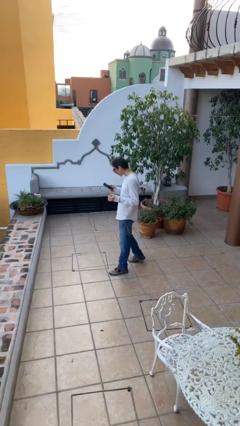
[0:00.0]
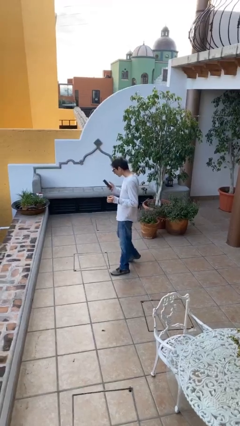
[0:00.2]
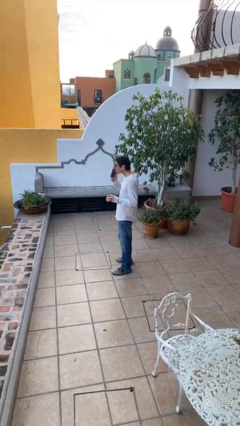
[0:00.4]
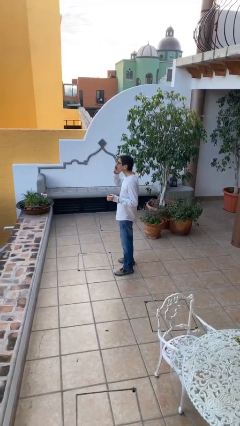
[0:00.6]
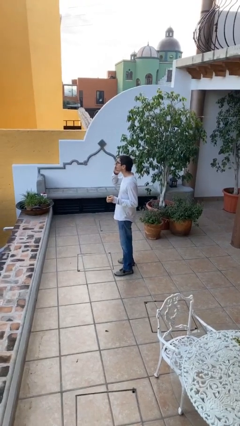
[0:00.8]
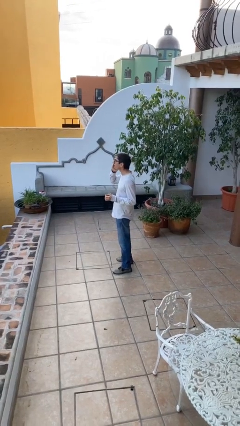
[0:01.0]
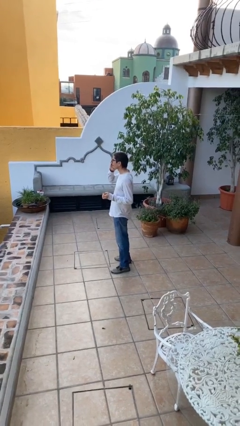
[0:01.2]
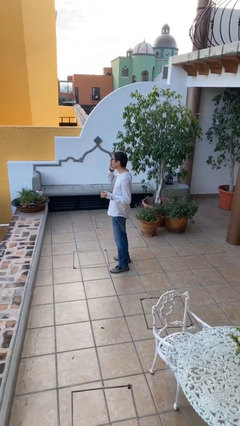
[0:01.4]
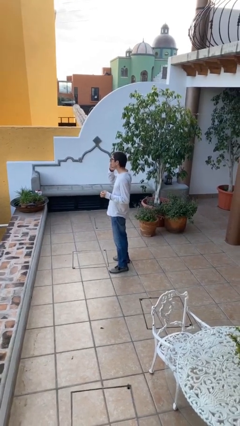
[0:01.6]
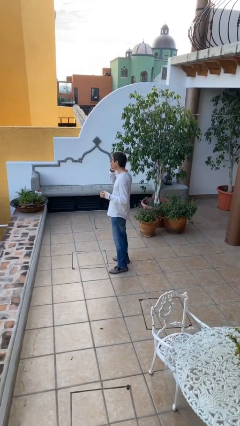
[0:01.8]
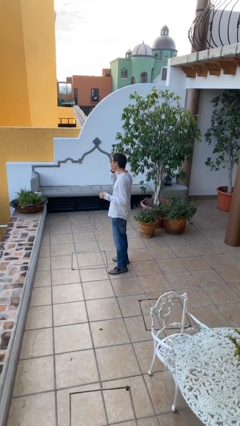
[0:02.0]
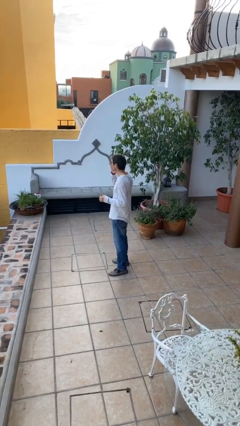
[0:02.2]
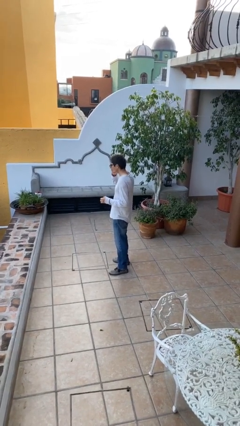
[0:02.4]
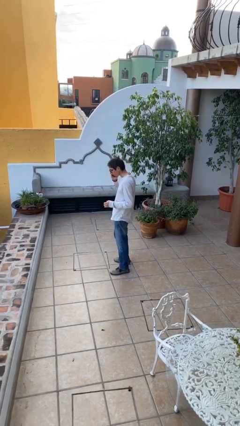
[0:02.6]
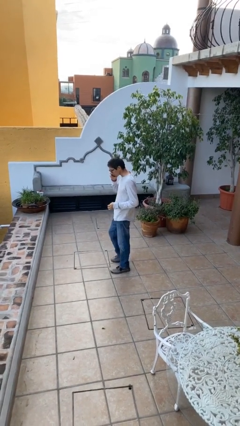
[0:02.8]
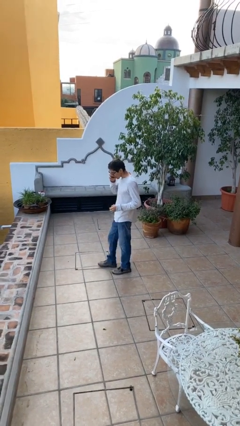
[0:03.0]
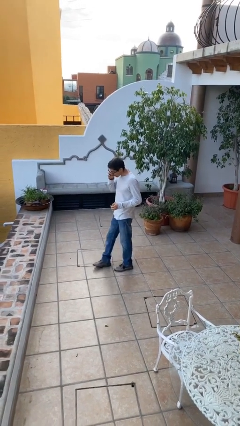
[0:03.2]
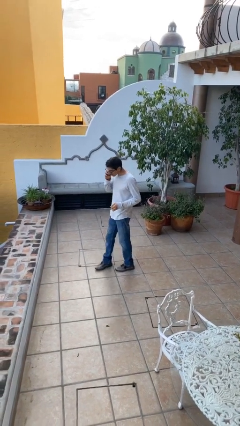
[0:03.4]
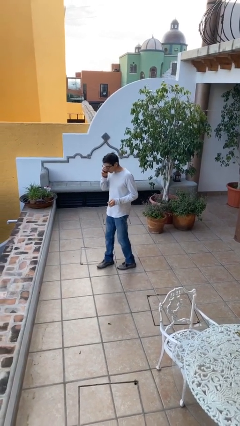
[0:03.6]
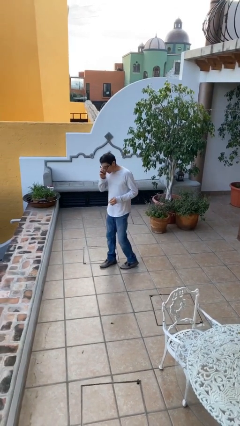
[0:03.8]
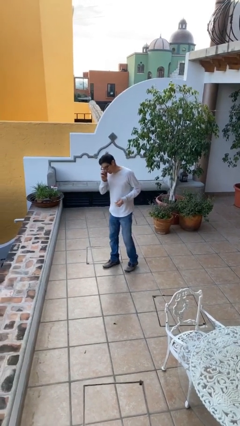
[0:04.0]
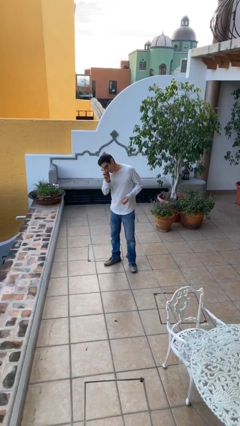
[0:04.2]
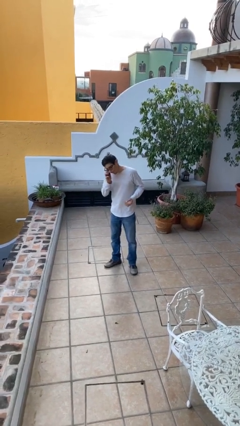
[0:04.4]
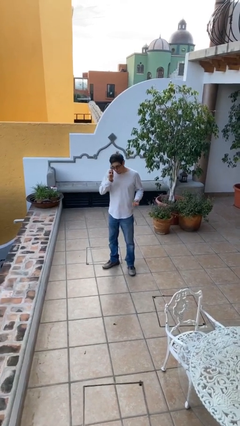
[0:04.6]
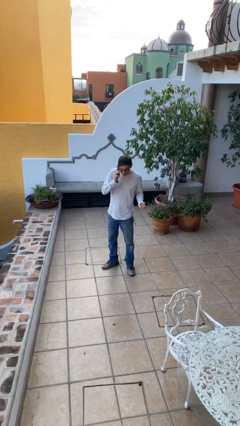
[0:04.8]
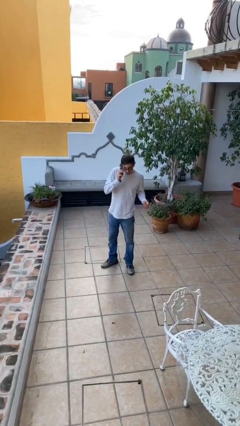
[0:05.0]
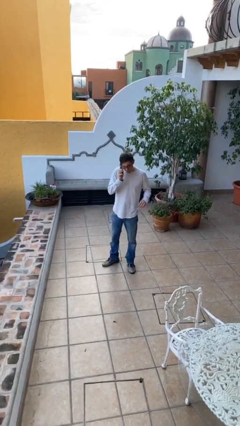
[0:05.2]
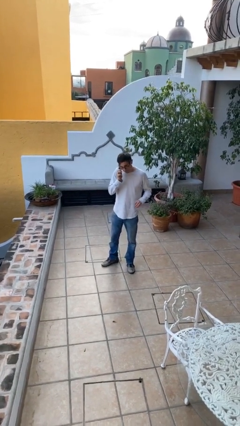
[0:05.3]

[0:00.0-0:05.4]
person talks on phone

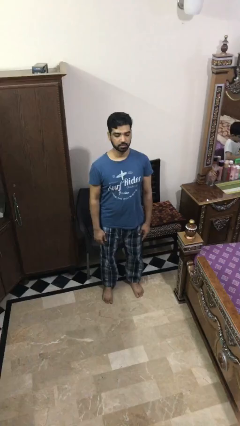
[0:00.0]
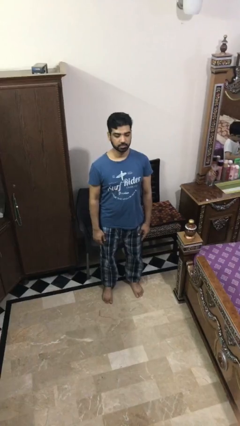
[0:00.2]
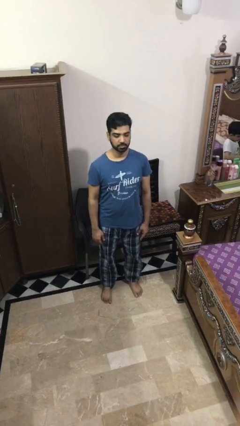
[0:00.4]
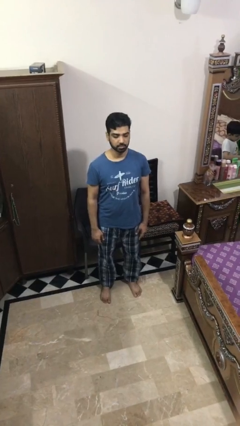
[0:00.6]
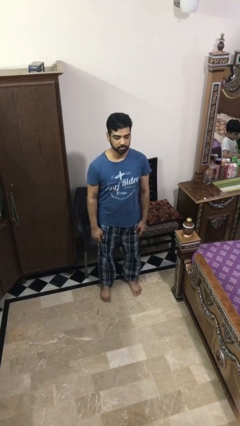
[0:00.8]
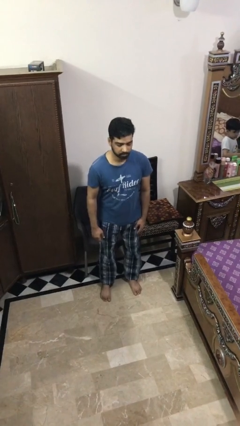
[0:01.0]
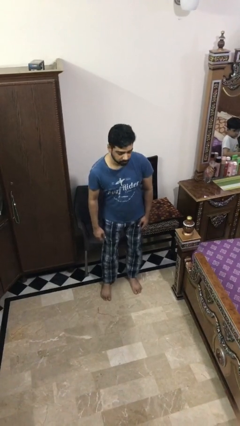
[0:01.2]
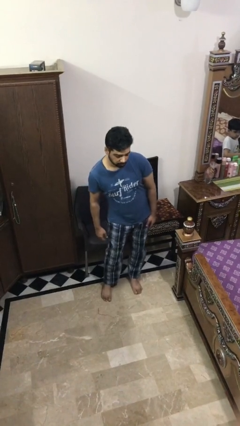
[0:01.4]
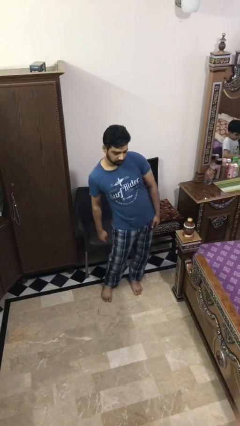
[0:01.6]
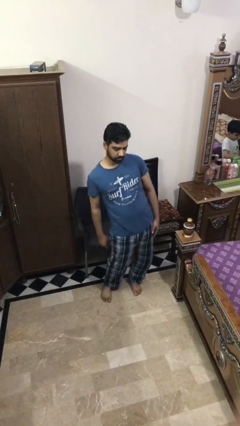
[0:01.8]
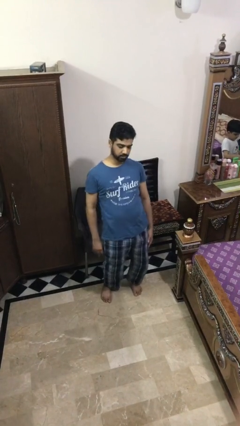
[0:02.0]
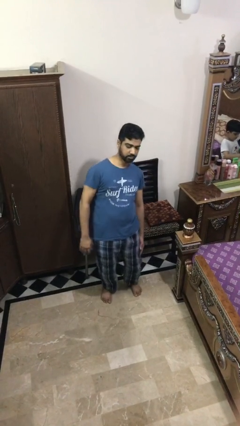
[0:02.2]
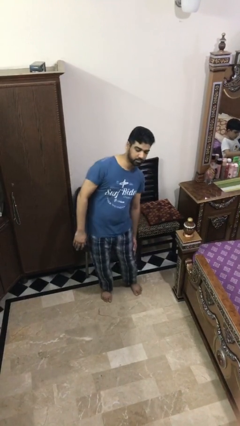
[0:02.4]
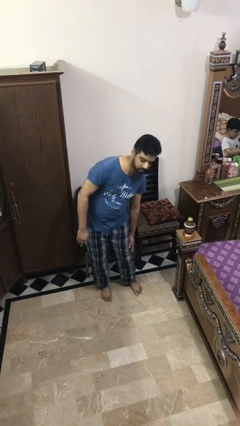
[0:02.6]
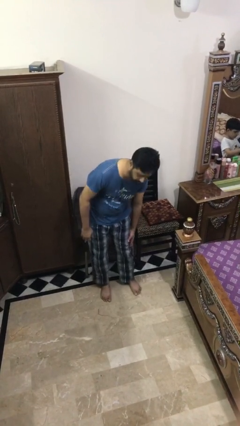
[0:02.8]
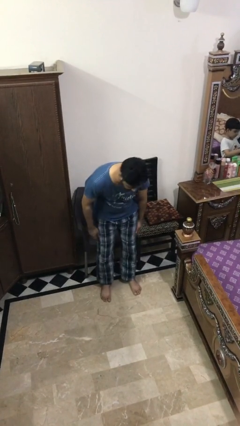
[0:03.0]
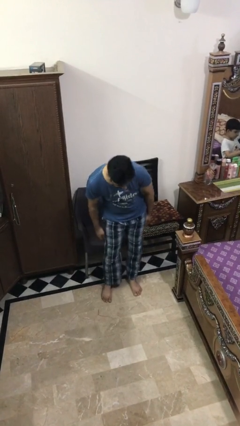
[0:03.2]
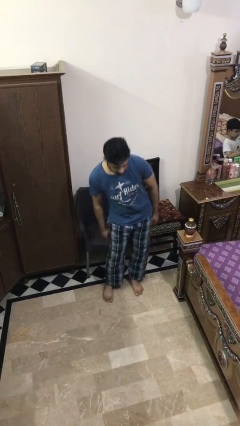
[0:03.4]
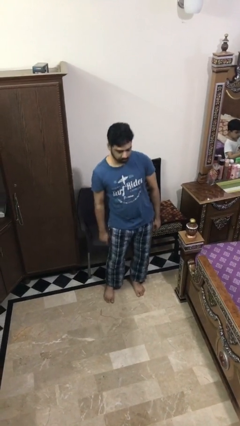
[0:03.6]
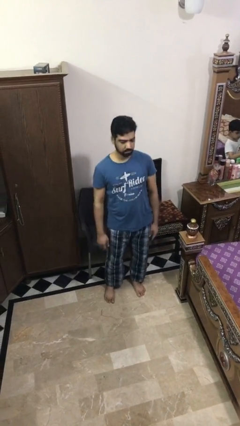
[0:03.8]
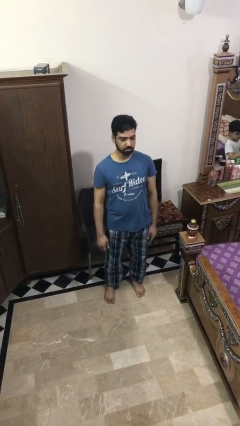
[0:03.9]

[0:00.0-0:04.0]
person wiggles hips

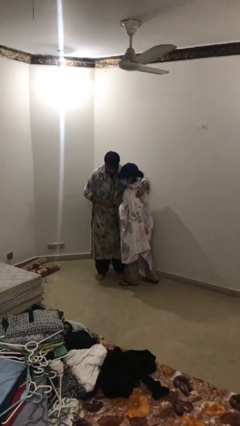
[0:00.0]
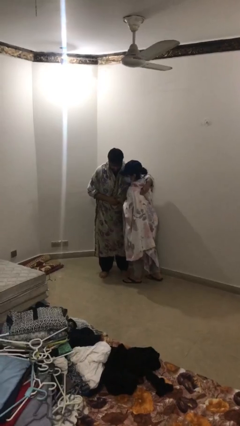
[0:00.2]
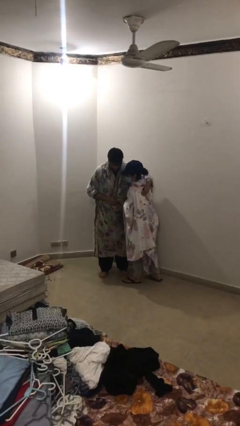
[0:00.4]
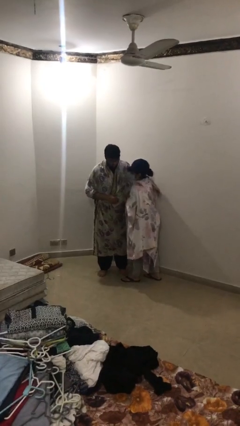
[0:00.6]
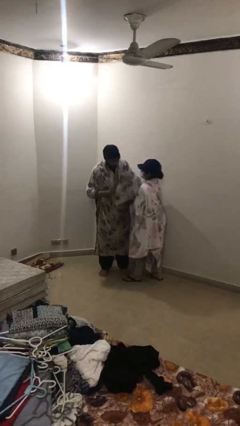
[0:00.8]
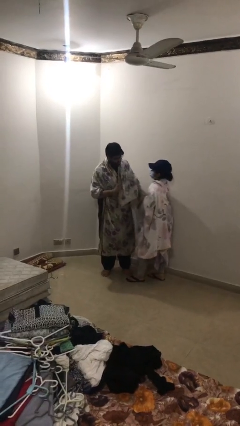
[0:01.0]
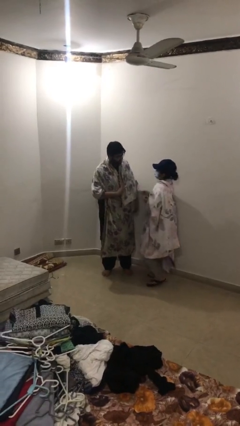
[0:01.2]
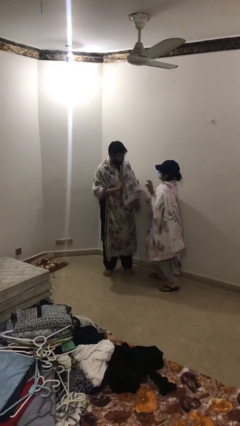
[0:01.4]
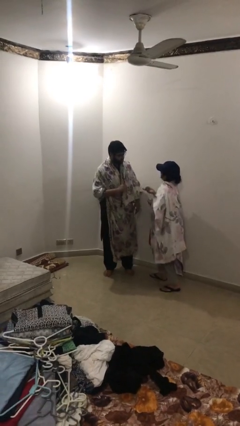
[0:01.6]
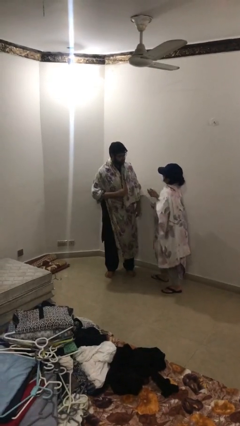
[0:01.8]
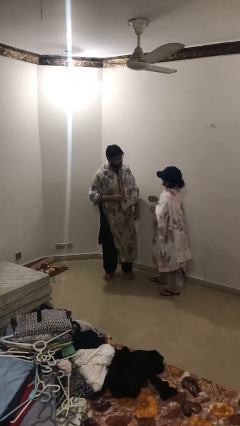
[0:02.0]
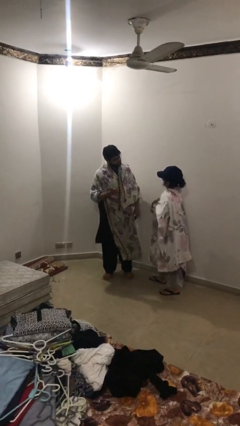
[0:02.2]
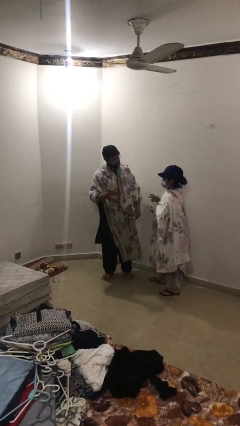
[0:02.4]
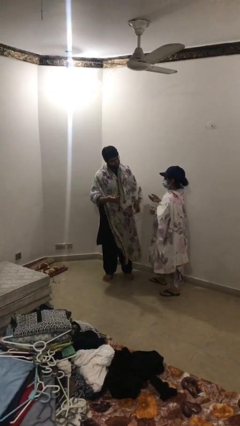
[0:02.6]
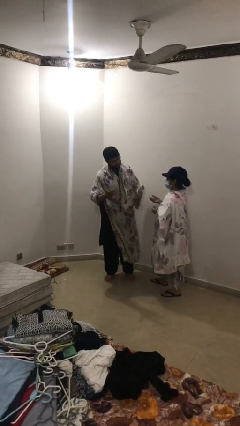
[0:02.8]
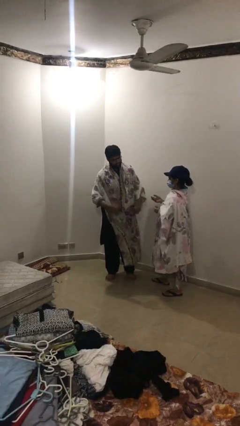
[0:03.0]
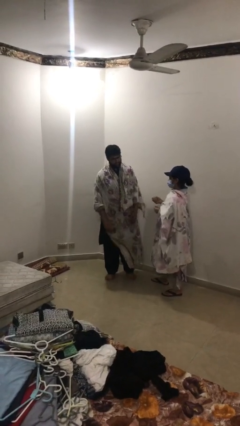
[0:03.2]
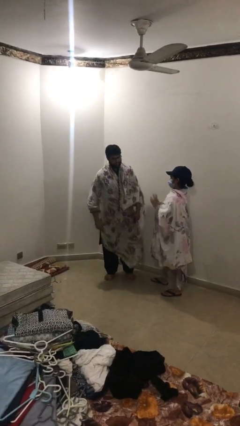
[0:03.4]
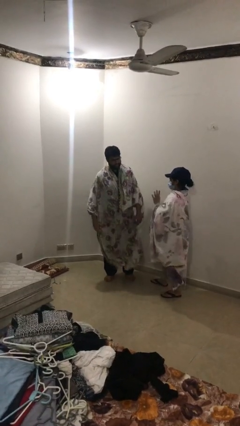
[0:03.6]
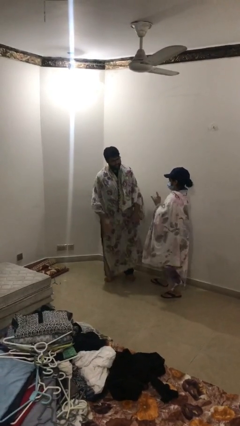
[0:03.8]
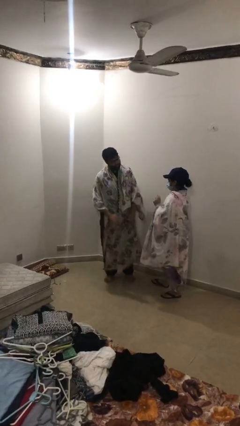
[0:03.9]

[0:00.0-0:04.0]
person talks to person

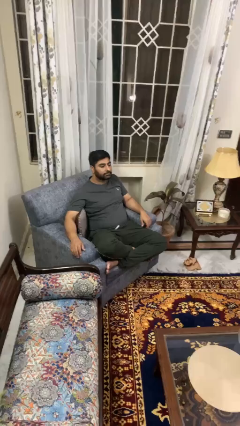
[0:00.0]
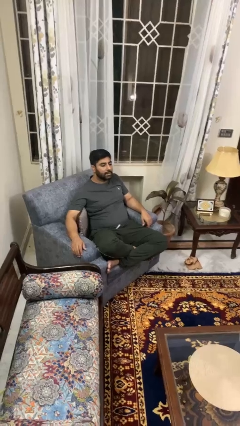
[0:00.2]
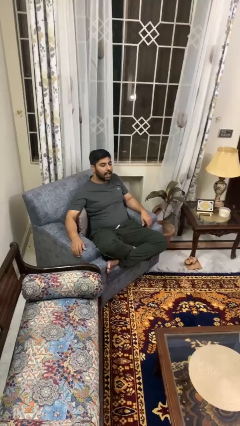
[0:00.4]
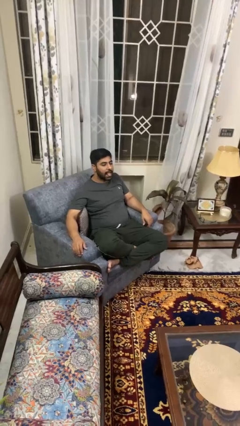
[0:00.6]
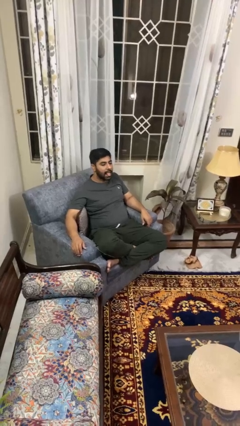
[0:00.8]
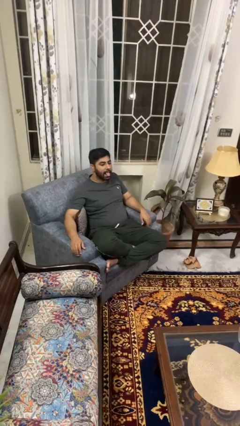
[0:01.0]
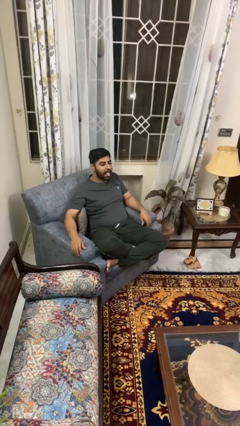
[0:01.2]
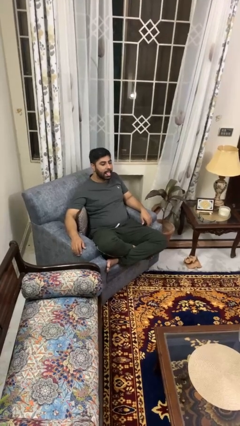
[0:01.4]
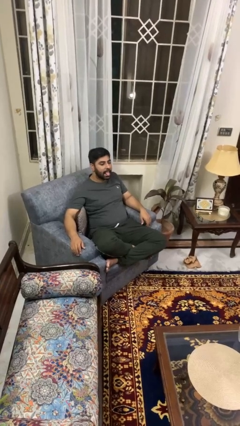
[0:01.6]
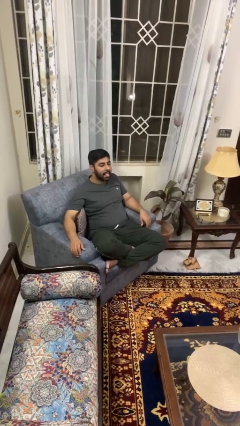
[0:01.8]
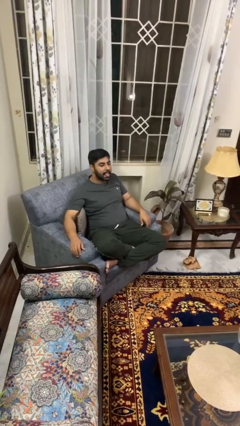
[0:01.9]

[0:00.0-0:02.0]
person sticks out tongue

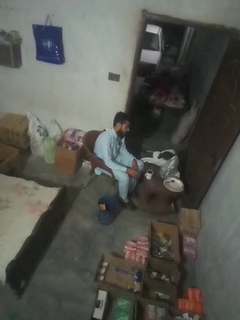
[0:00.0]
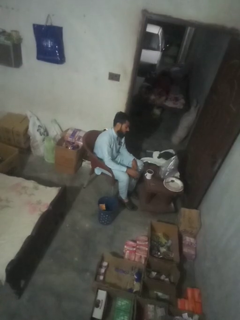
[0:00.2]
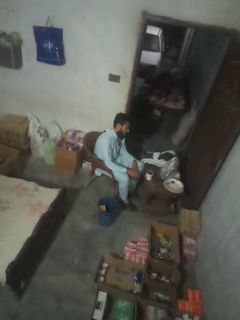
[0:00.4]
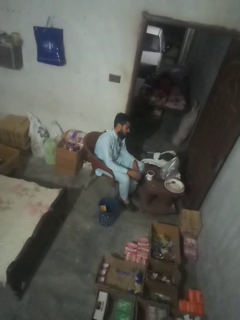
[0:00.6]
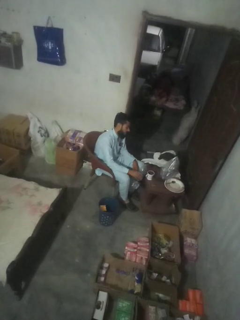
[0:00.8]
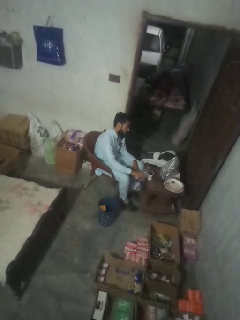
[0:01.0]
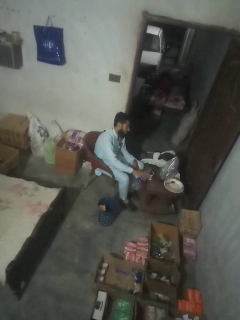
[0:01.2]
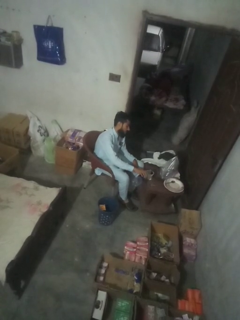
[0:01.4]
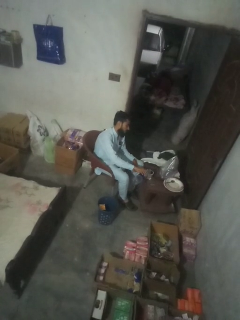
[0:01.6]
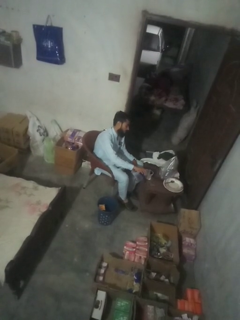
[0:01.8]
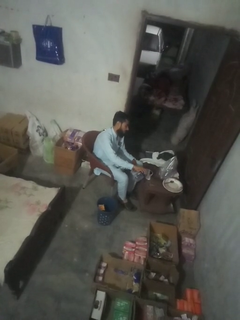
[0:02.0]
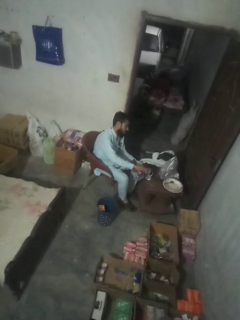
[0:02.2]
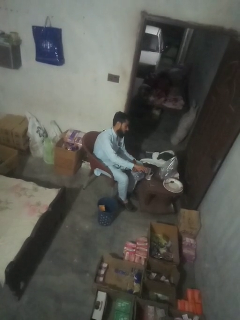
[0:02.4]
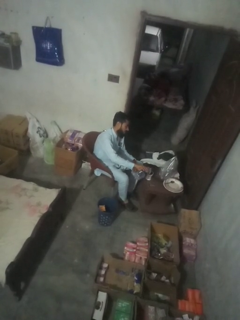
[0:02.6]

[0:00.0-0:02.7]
person pours liquid into cup

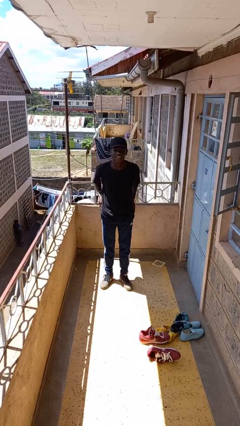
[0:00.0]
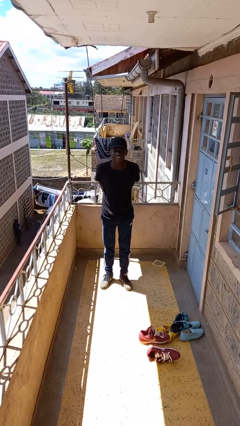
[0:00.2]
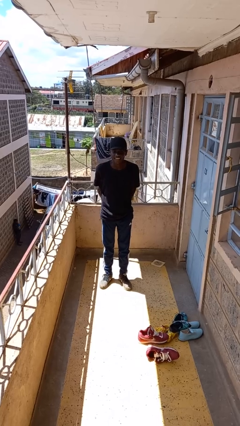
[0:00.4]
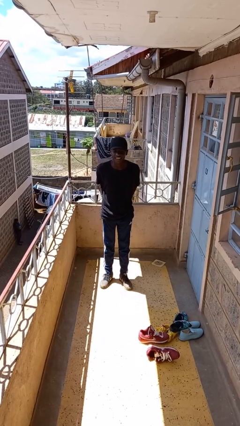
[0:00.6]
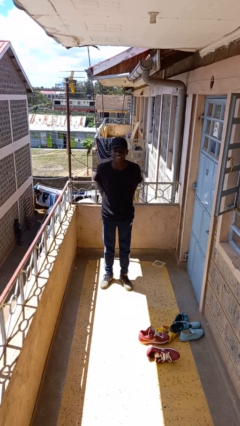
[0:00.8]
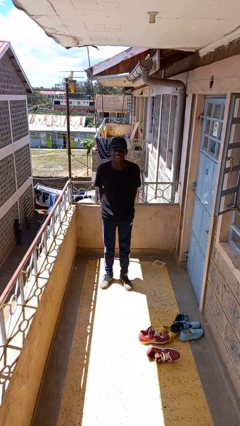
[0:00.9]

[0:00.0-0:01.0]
person puts hands in back pockets
